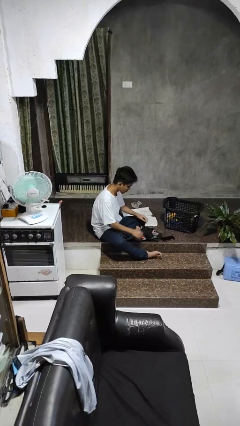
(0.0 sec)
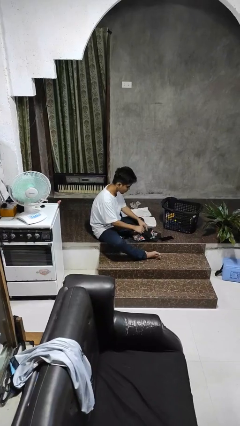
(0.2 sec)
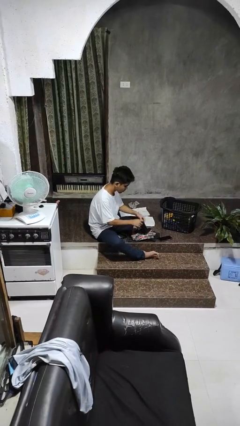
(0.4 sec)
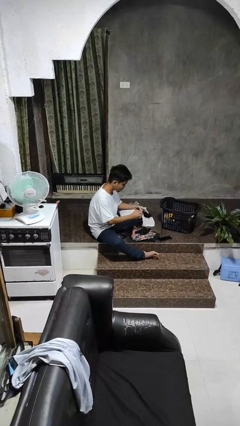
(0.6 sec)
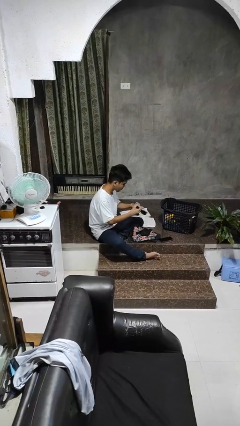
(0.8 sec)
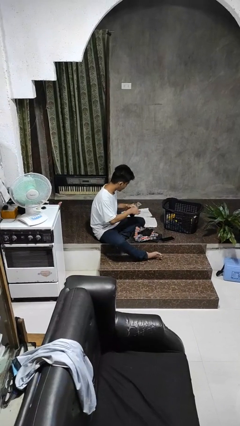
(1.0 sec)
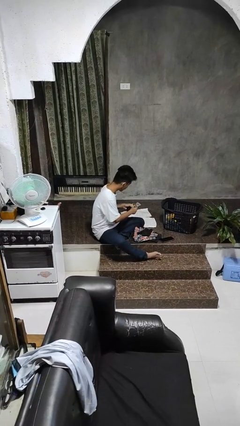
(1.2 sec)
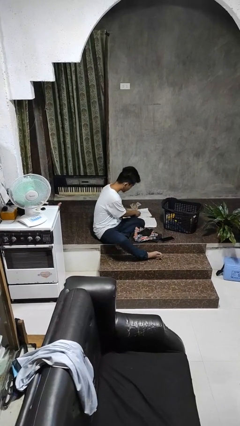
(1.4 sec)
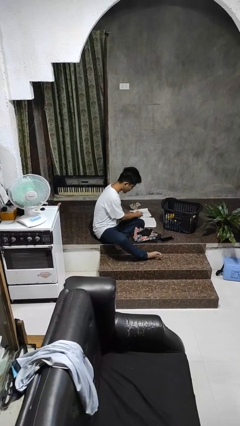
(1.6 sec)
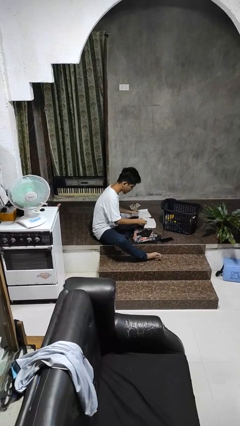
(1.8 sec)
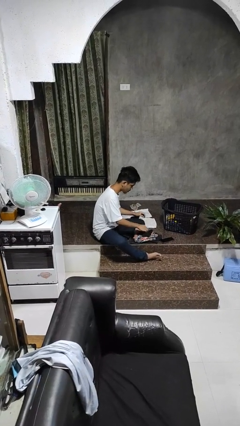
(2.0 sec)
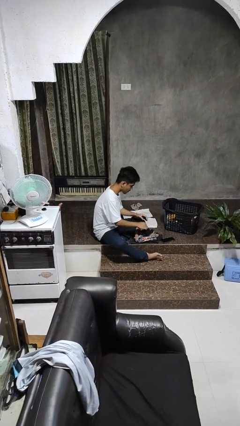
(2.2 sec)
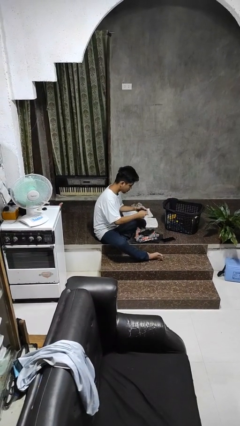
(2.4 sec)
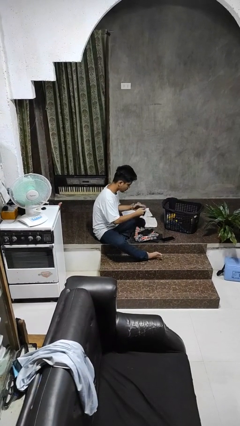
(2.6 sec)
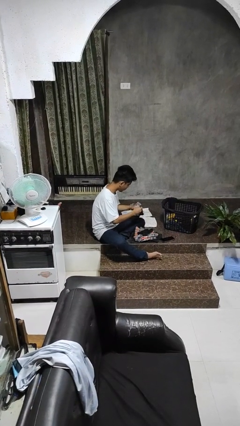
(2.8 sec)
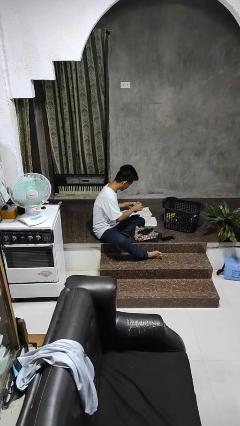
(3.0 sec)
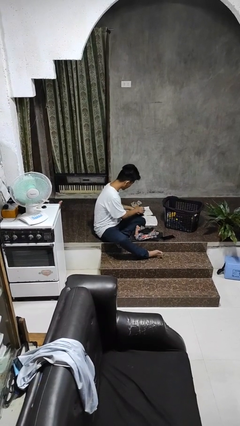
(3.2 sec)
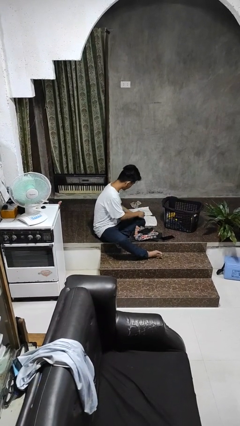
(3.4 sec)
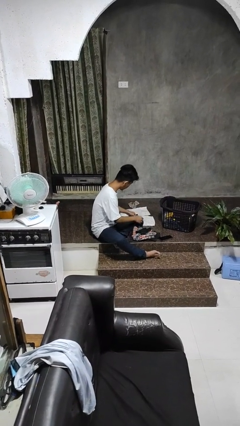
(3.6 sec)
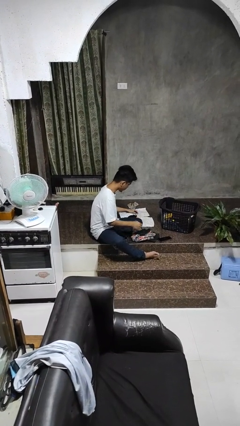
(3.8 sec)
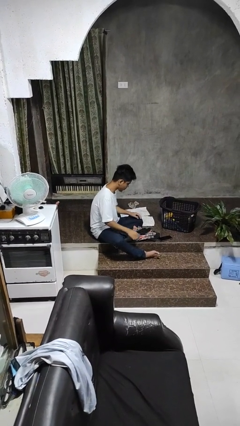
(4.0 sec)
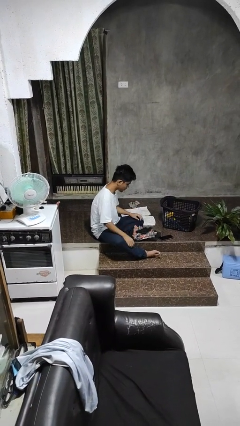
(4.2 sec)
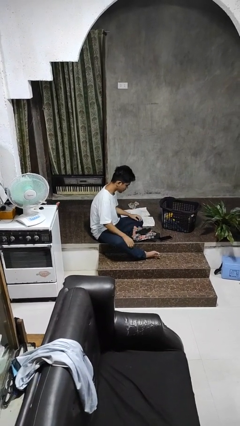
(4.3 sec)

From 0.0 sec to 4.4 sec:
person folds socks

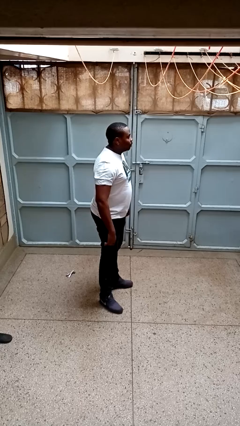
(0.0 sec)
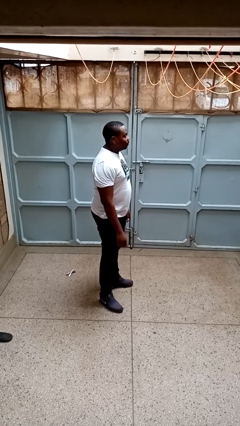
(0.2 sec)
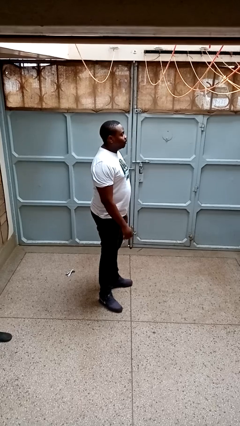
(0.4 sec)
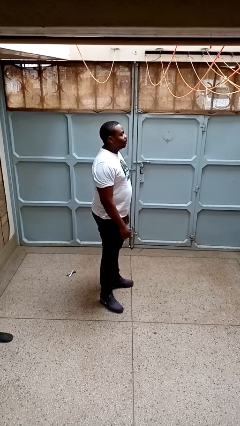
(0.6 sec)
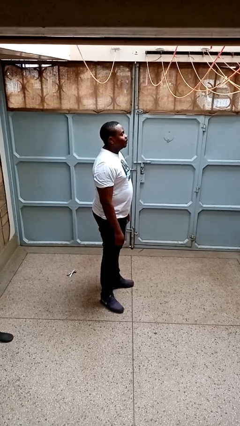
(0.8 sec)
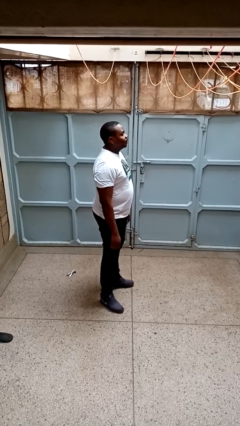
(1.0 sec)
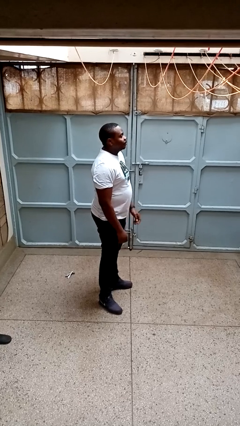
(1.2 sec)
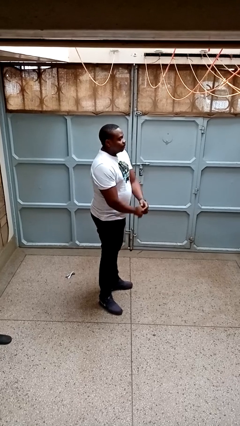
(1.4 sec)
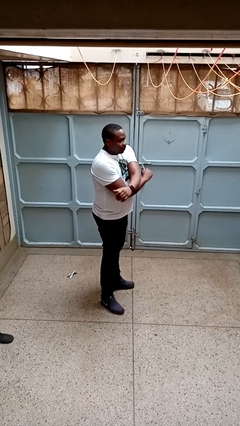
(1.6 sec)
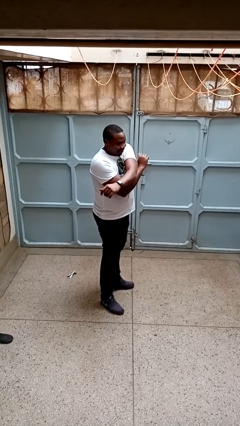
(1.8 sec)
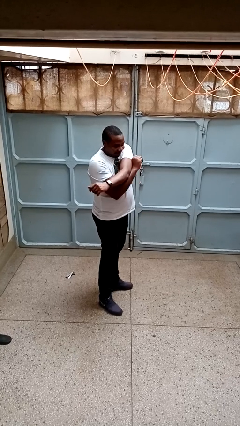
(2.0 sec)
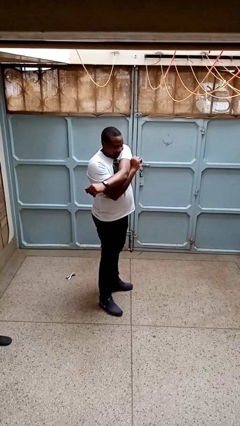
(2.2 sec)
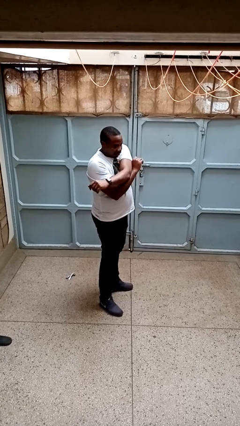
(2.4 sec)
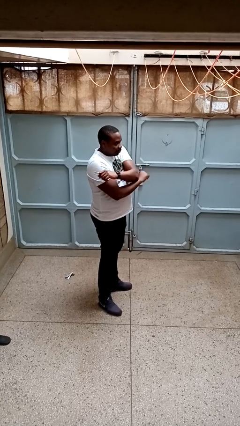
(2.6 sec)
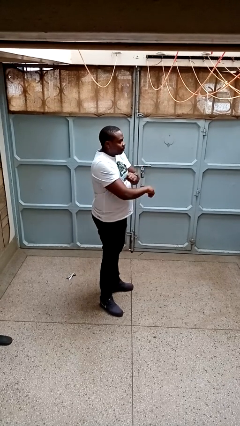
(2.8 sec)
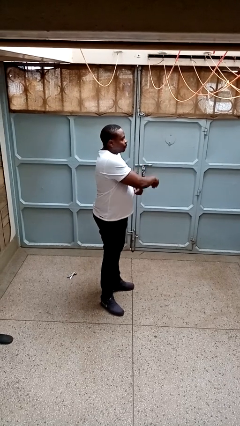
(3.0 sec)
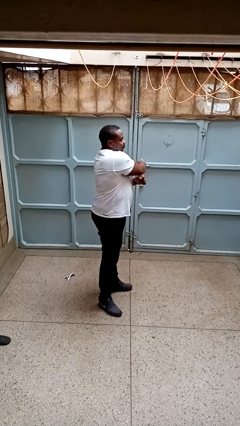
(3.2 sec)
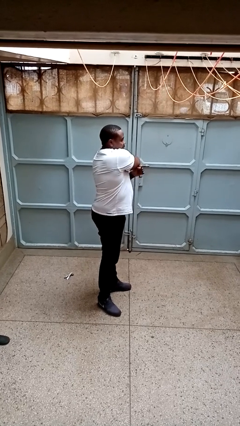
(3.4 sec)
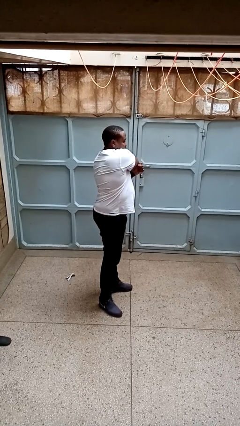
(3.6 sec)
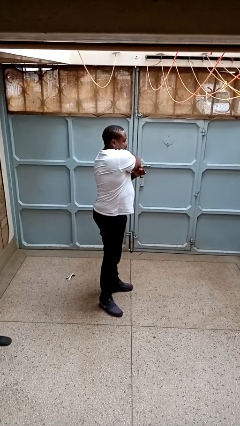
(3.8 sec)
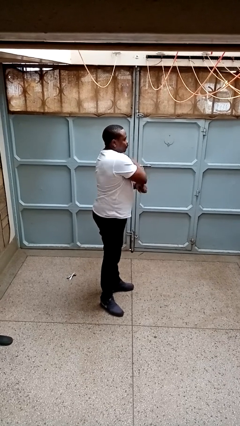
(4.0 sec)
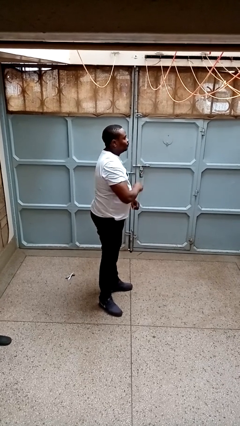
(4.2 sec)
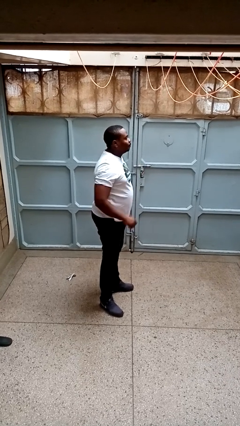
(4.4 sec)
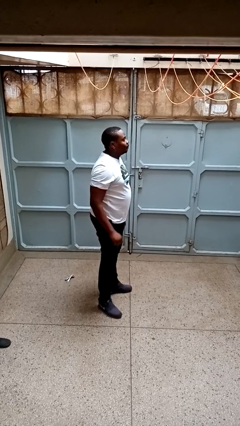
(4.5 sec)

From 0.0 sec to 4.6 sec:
person stretches arms to side

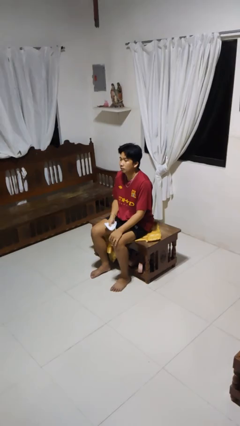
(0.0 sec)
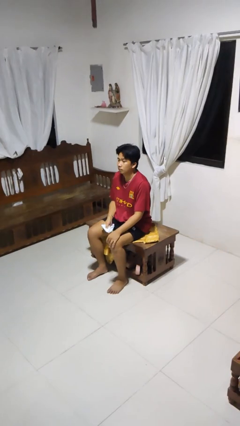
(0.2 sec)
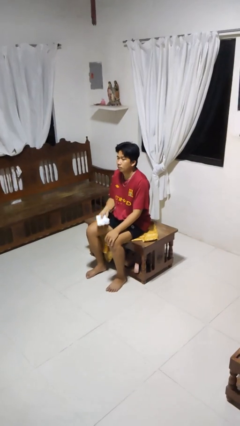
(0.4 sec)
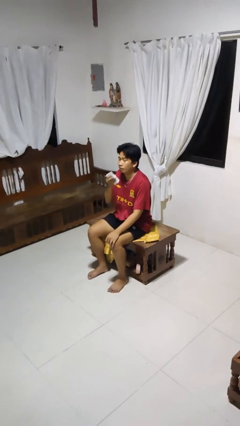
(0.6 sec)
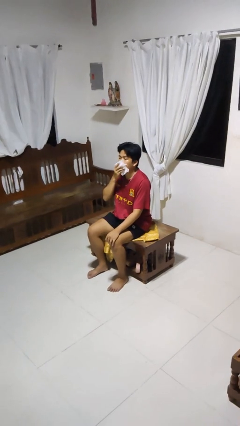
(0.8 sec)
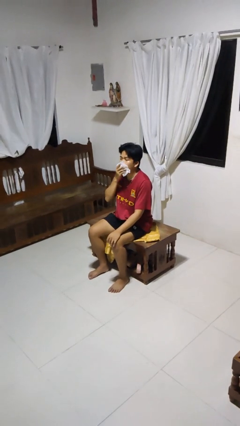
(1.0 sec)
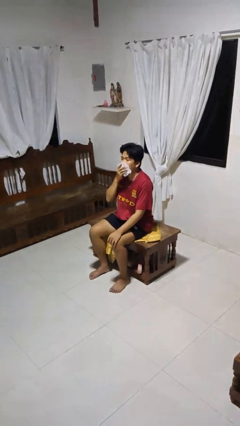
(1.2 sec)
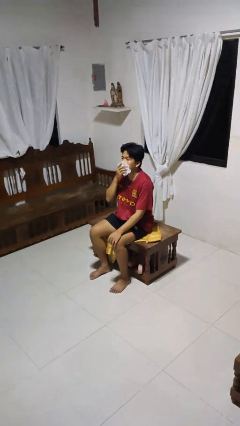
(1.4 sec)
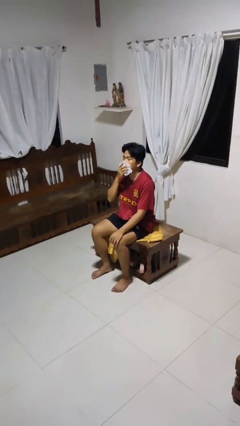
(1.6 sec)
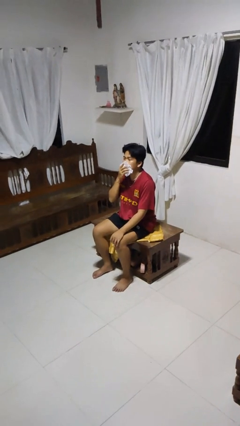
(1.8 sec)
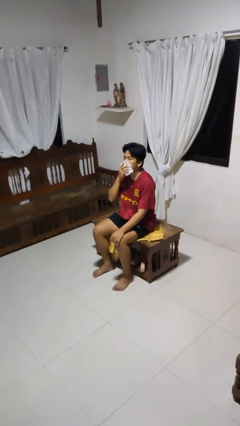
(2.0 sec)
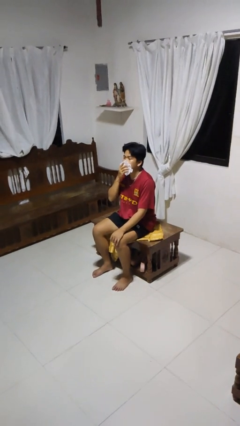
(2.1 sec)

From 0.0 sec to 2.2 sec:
person wipes mouth with napkin

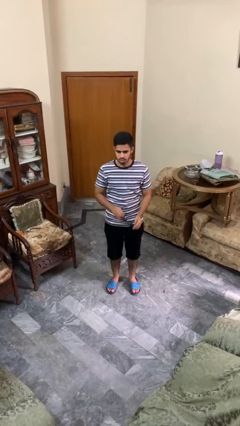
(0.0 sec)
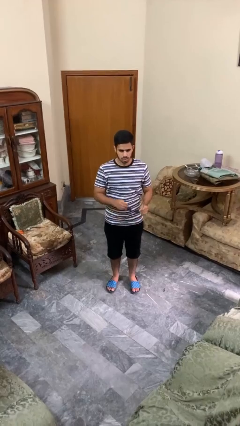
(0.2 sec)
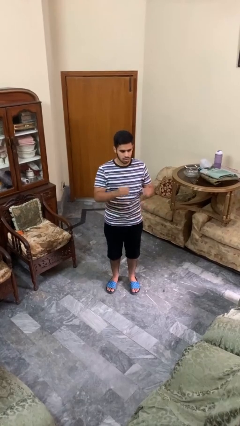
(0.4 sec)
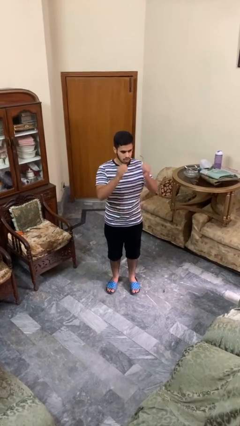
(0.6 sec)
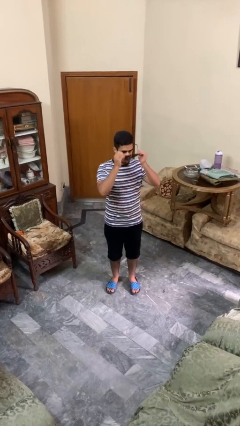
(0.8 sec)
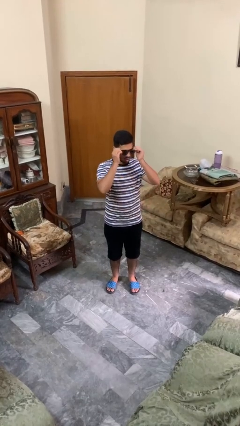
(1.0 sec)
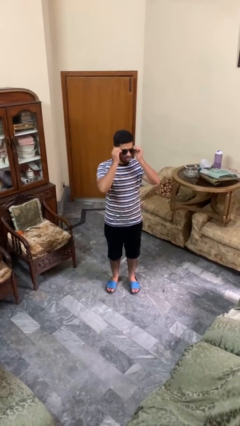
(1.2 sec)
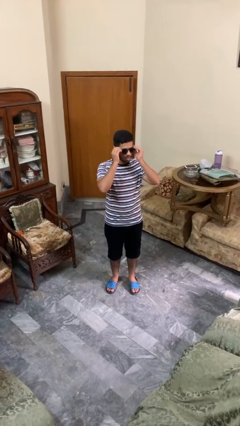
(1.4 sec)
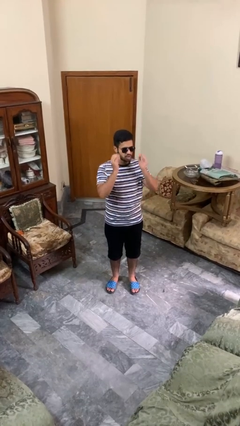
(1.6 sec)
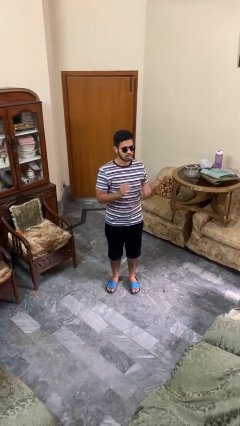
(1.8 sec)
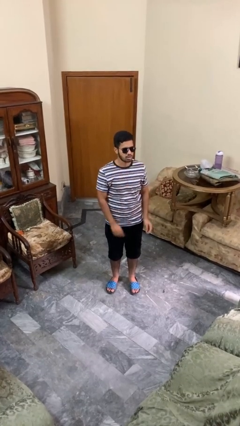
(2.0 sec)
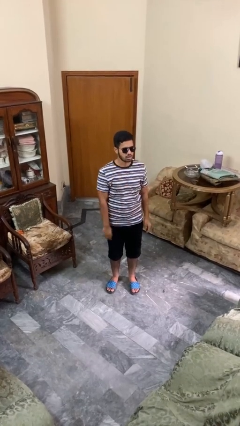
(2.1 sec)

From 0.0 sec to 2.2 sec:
person puts on sunglasses

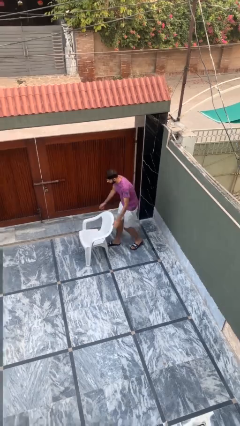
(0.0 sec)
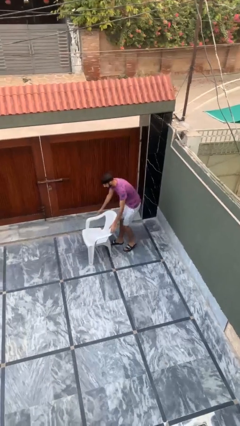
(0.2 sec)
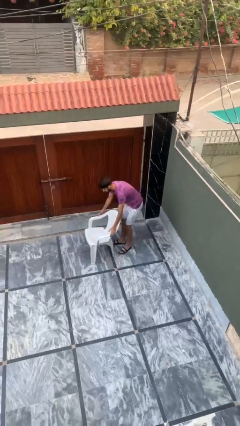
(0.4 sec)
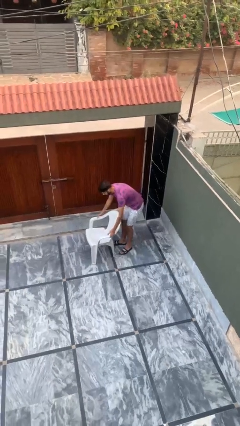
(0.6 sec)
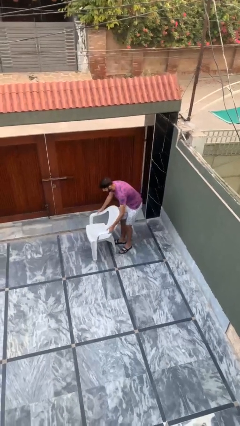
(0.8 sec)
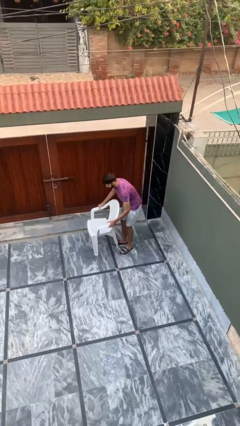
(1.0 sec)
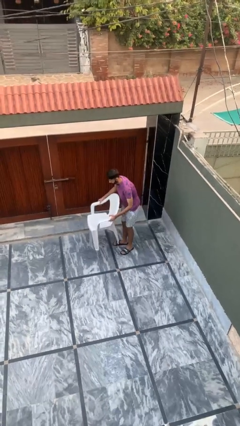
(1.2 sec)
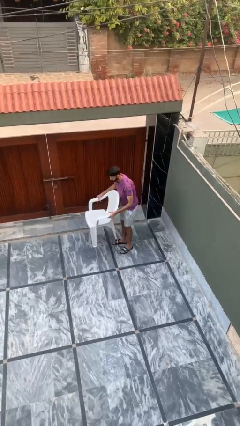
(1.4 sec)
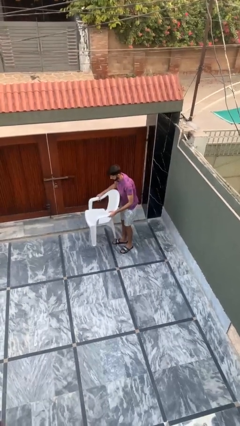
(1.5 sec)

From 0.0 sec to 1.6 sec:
person picks up object from floor

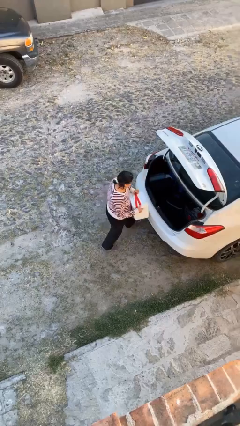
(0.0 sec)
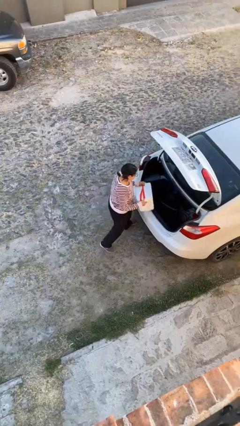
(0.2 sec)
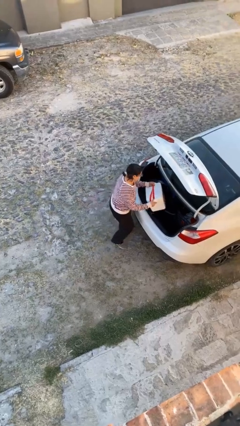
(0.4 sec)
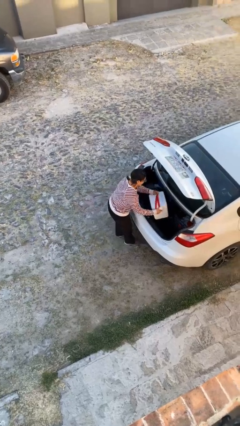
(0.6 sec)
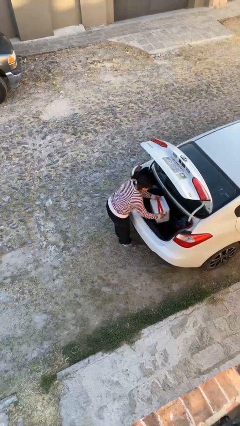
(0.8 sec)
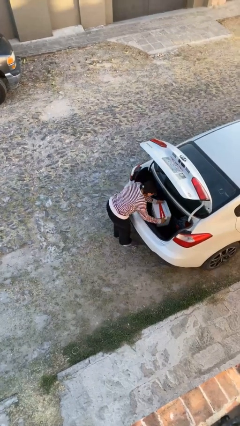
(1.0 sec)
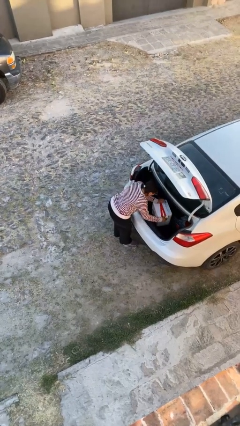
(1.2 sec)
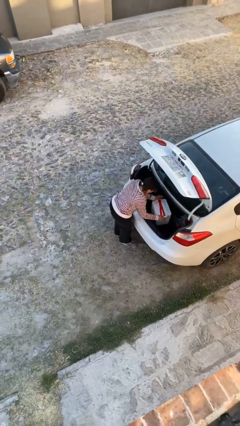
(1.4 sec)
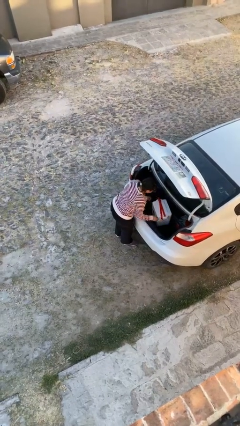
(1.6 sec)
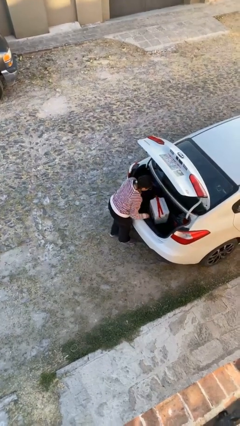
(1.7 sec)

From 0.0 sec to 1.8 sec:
person loads car

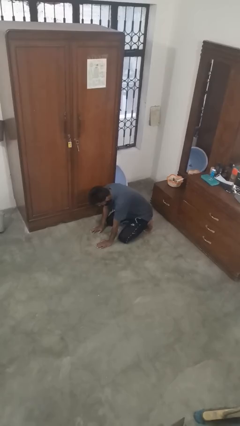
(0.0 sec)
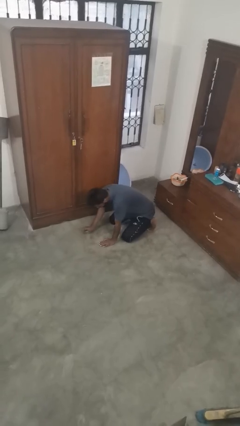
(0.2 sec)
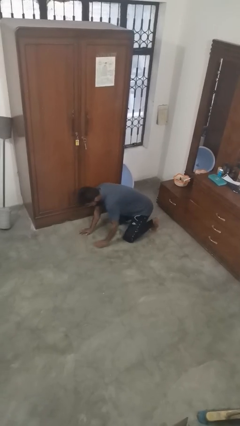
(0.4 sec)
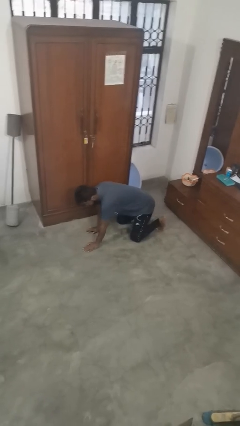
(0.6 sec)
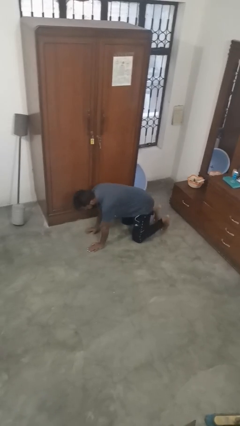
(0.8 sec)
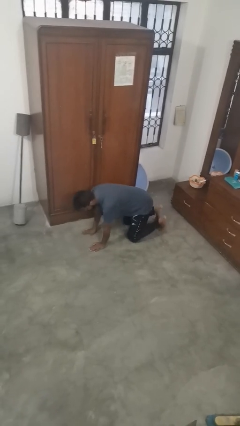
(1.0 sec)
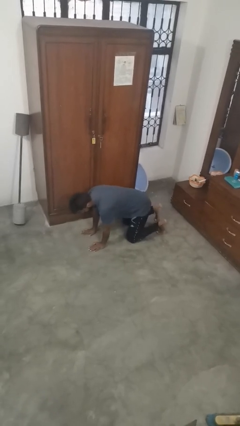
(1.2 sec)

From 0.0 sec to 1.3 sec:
person crawls
